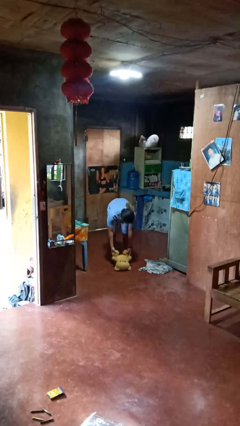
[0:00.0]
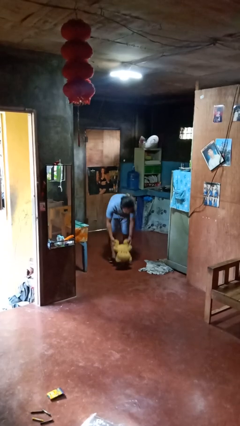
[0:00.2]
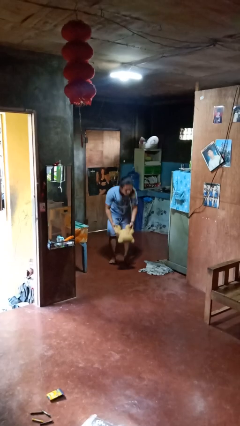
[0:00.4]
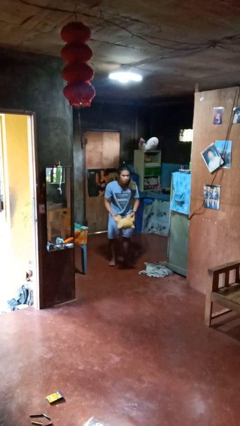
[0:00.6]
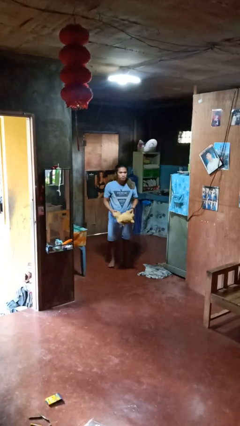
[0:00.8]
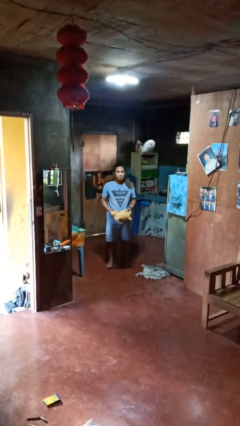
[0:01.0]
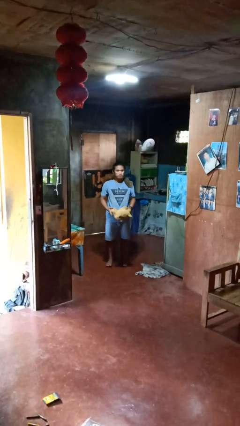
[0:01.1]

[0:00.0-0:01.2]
person picks up object from floor

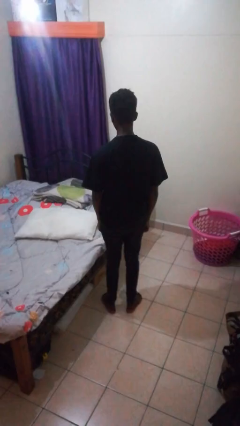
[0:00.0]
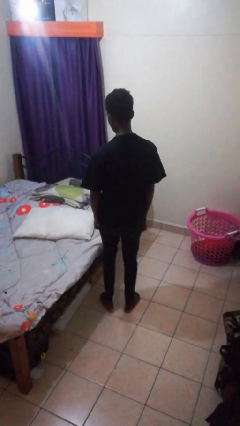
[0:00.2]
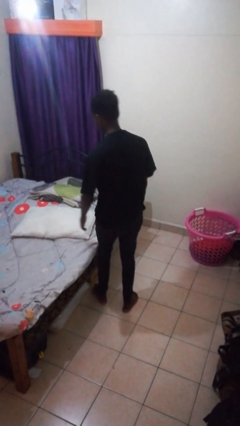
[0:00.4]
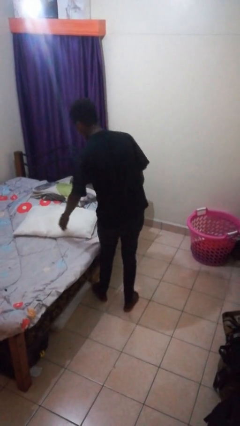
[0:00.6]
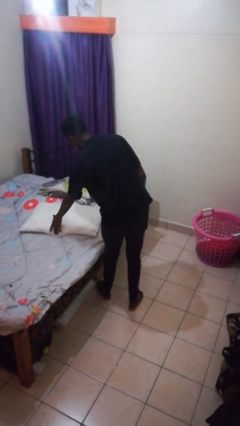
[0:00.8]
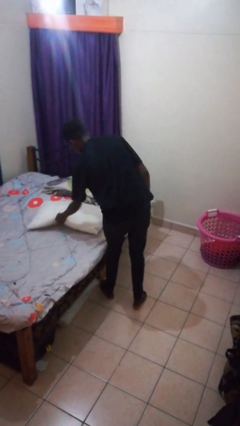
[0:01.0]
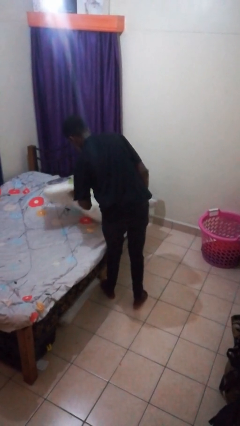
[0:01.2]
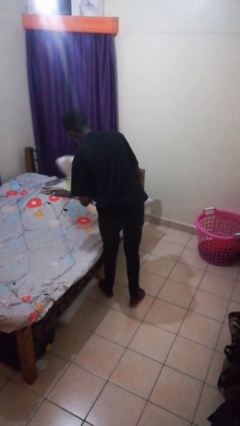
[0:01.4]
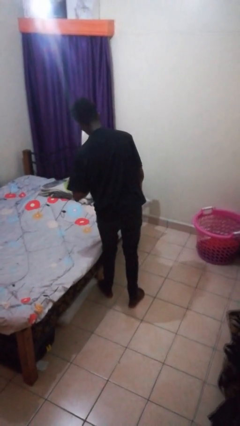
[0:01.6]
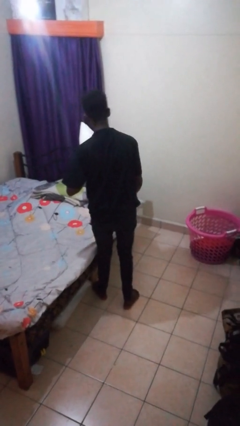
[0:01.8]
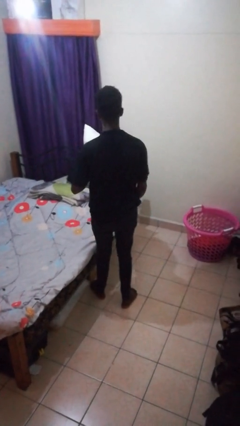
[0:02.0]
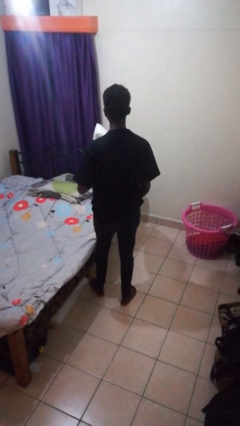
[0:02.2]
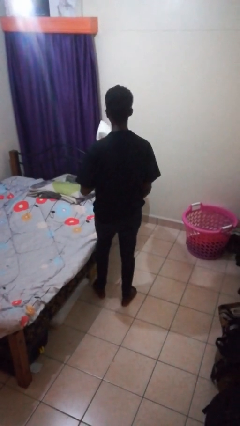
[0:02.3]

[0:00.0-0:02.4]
person picks up object from bed

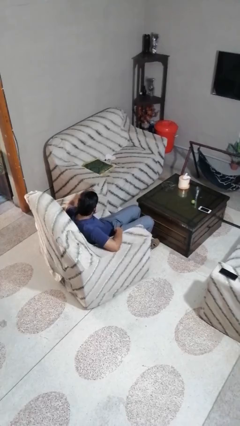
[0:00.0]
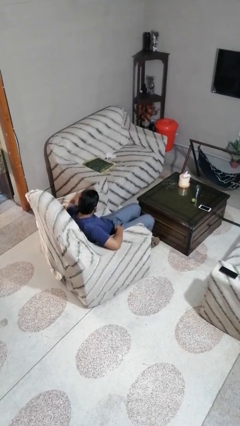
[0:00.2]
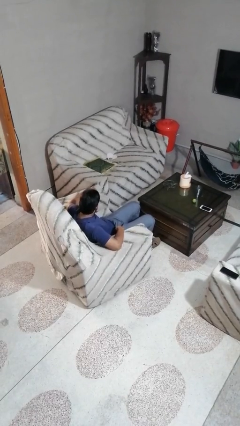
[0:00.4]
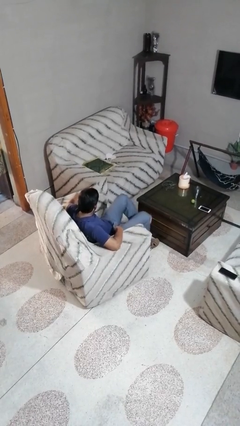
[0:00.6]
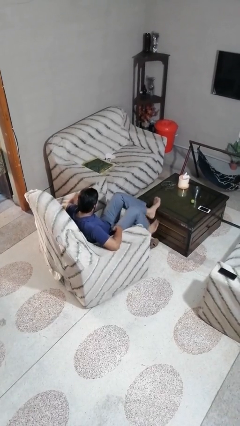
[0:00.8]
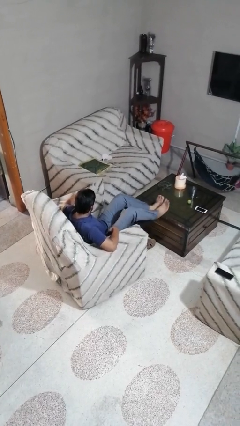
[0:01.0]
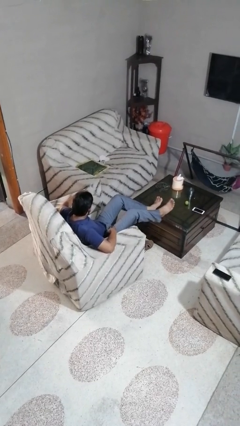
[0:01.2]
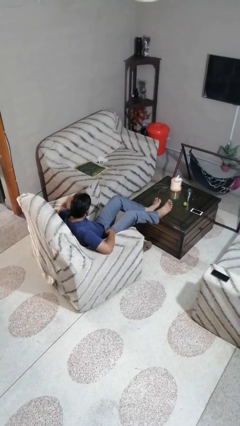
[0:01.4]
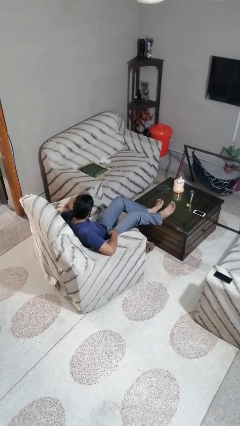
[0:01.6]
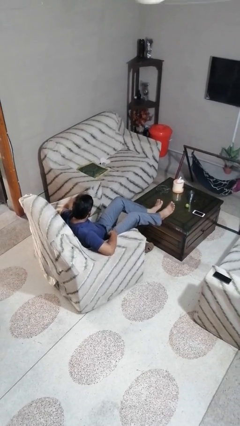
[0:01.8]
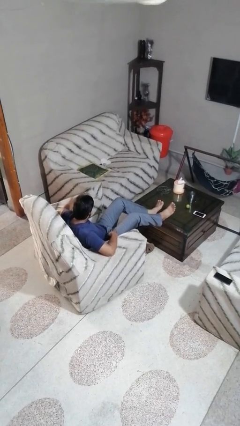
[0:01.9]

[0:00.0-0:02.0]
person puts feet up

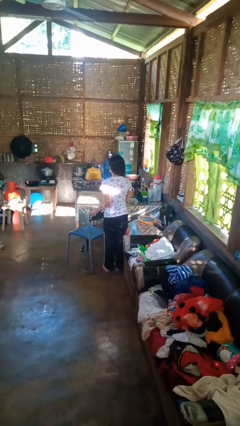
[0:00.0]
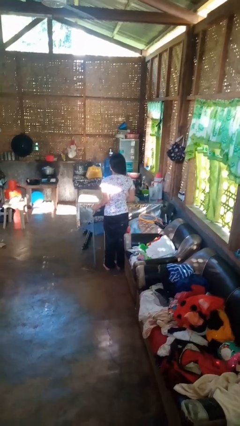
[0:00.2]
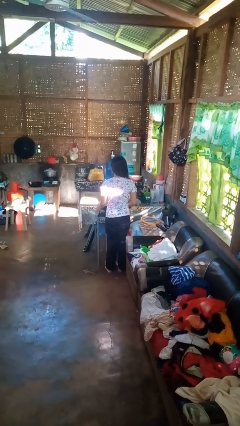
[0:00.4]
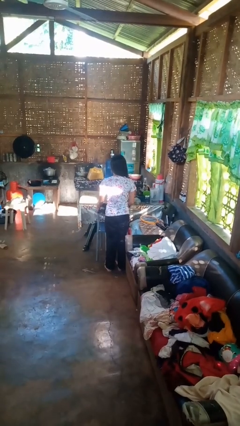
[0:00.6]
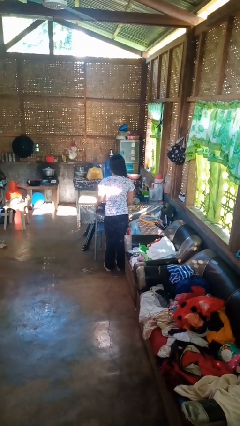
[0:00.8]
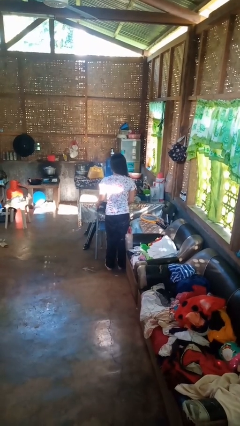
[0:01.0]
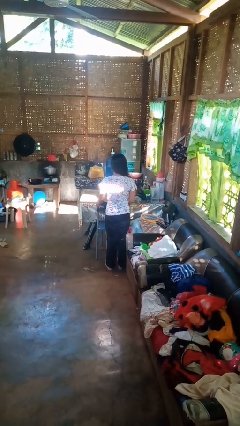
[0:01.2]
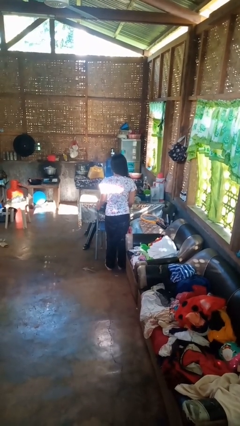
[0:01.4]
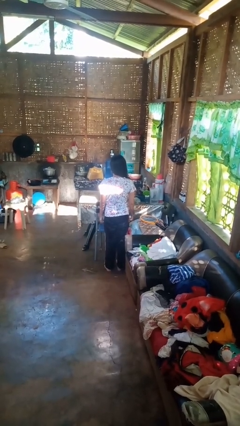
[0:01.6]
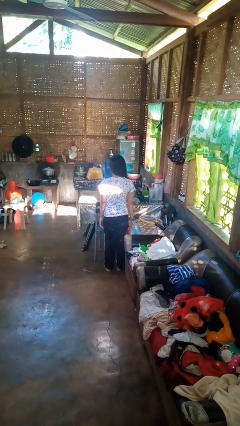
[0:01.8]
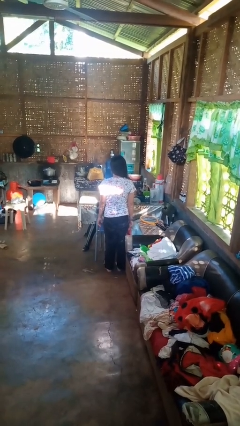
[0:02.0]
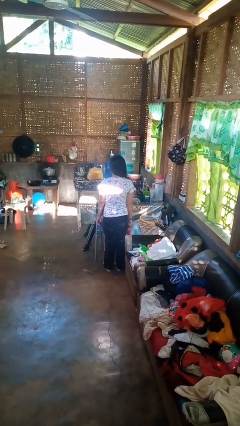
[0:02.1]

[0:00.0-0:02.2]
person pushes in chair

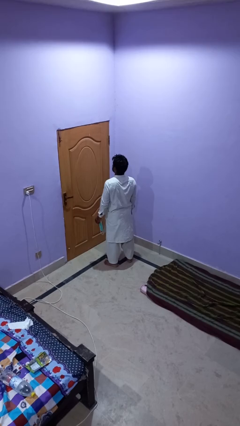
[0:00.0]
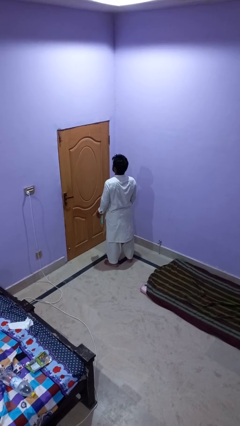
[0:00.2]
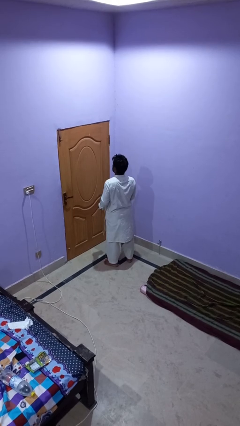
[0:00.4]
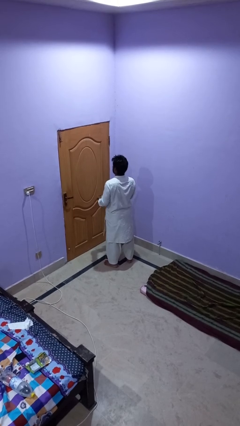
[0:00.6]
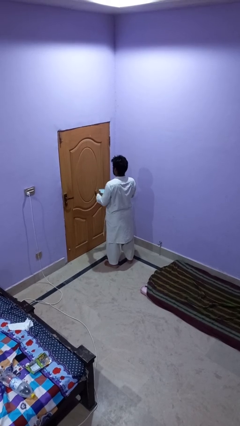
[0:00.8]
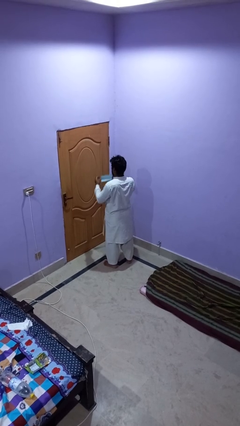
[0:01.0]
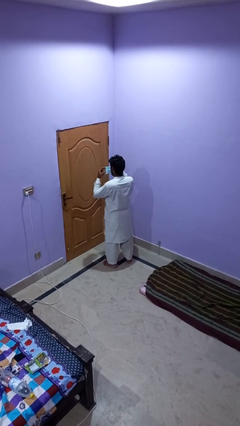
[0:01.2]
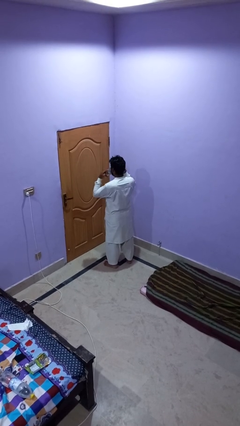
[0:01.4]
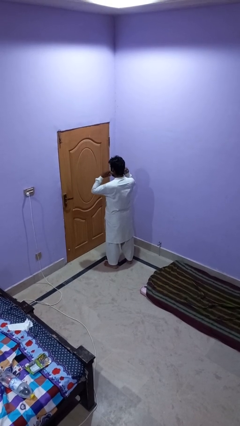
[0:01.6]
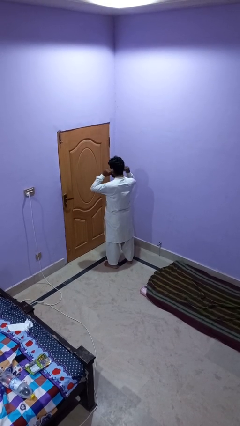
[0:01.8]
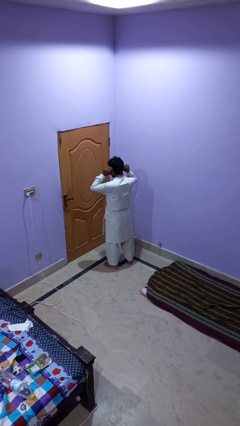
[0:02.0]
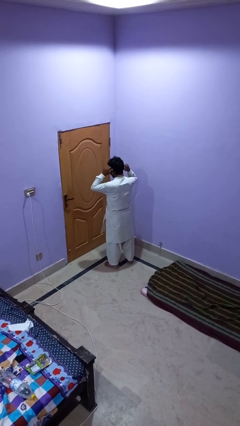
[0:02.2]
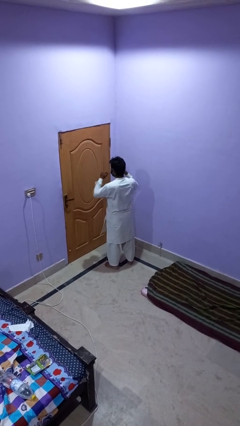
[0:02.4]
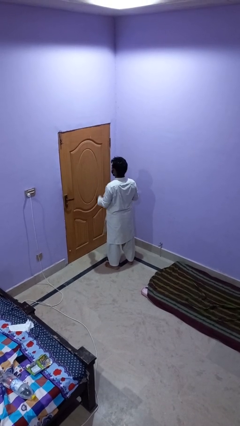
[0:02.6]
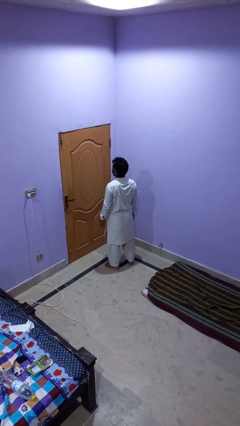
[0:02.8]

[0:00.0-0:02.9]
person puts on facemask

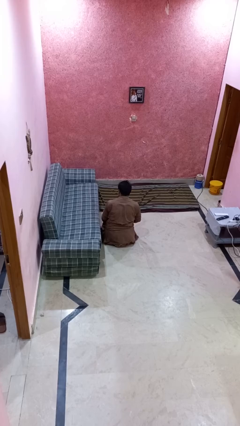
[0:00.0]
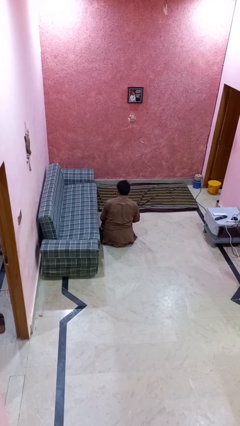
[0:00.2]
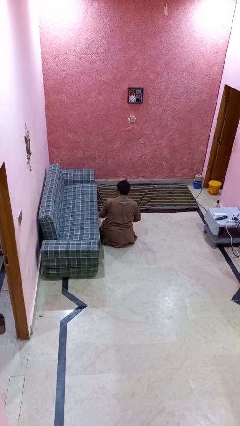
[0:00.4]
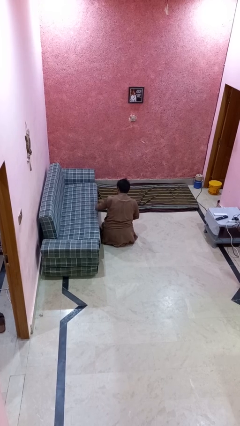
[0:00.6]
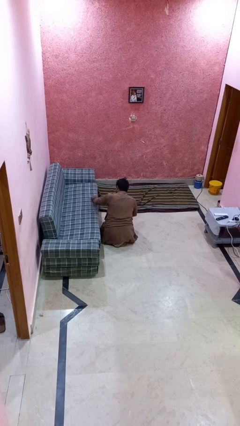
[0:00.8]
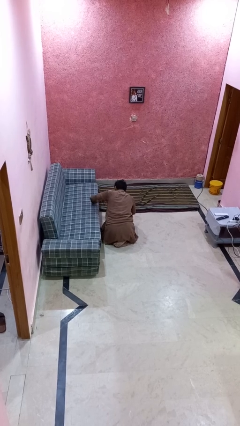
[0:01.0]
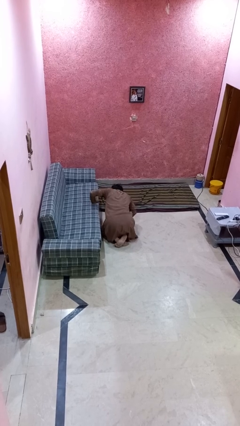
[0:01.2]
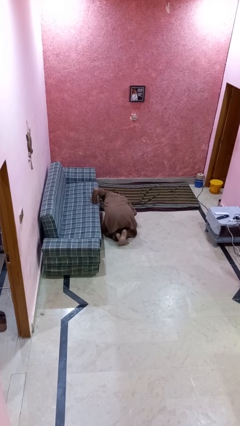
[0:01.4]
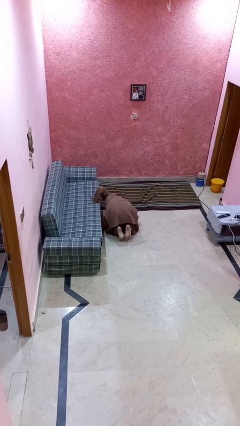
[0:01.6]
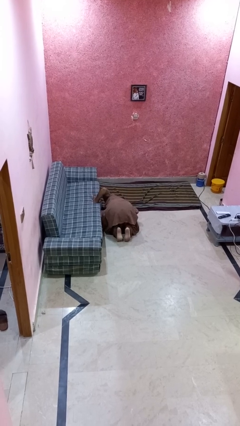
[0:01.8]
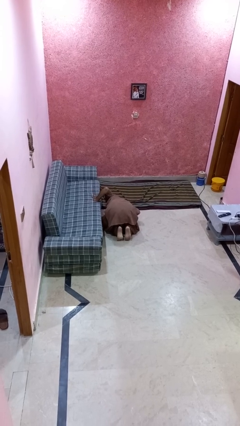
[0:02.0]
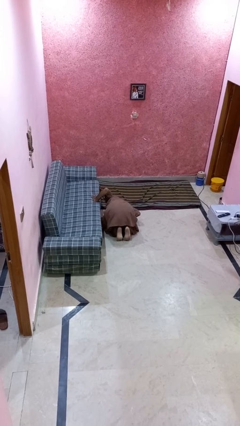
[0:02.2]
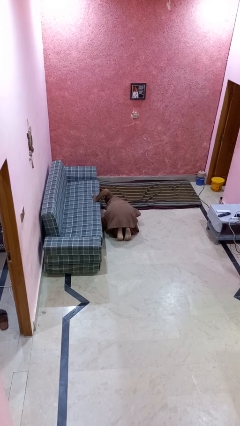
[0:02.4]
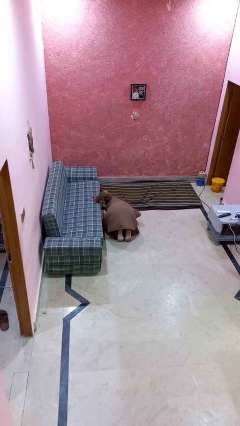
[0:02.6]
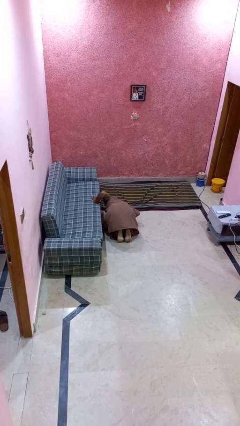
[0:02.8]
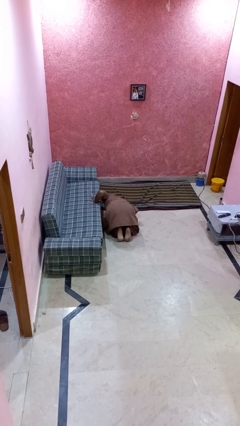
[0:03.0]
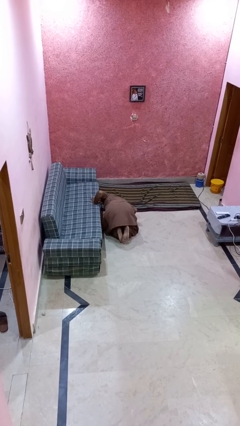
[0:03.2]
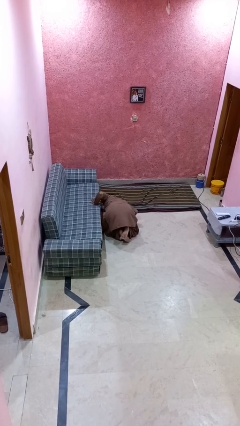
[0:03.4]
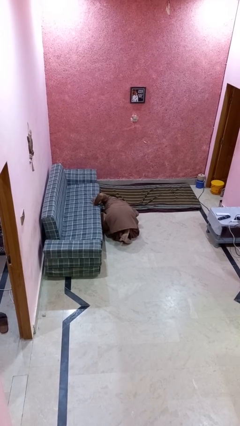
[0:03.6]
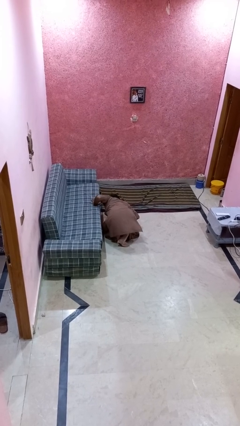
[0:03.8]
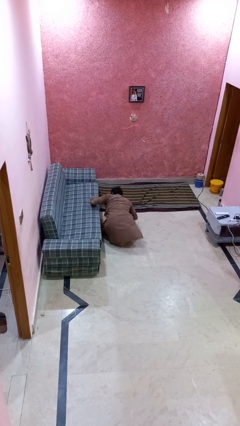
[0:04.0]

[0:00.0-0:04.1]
person searches under couch

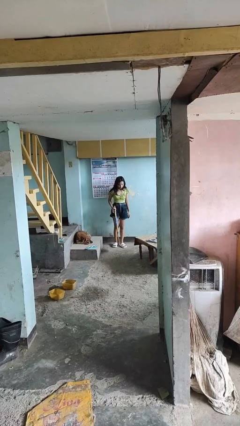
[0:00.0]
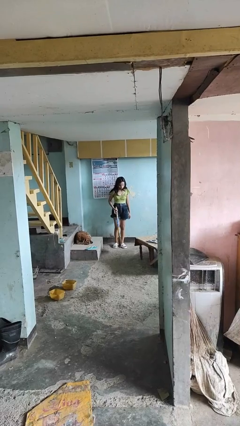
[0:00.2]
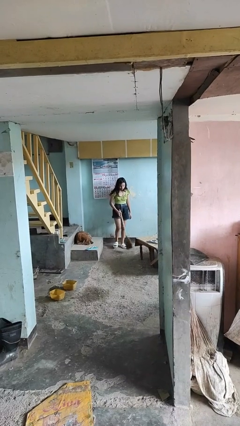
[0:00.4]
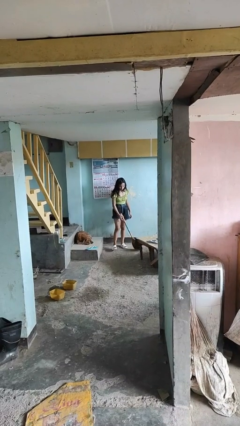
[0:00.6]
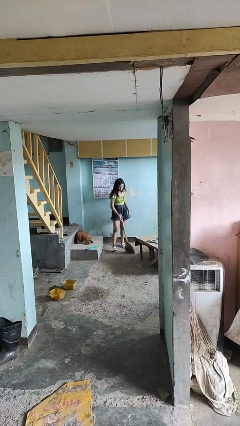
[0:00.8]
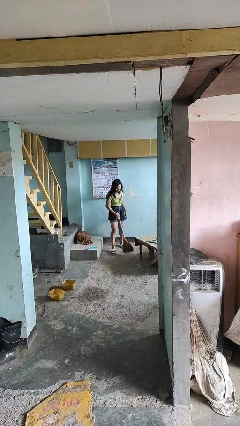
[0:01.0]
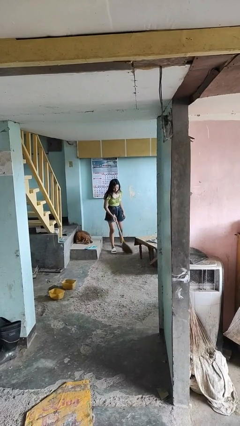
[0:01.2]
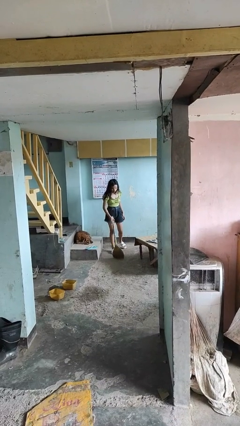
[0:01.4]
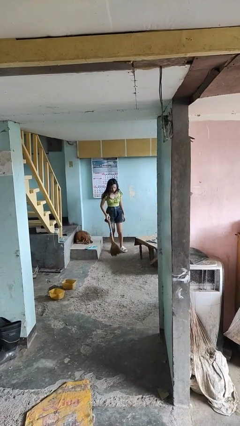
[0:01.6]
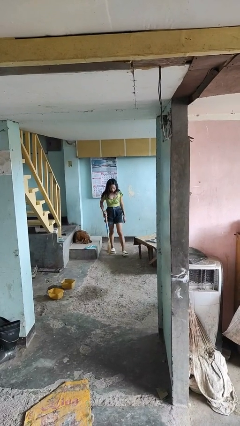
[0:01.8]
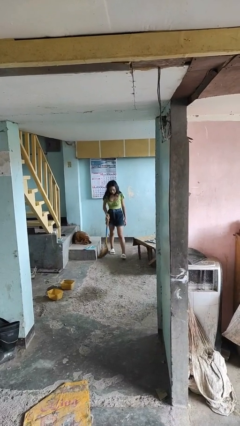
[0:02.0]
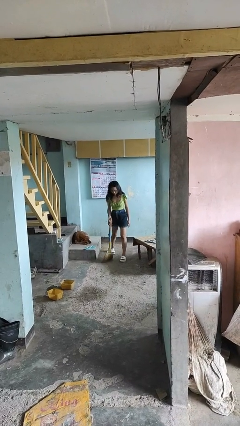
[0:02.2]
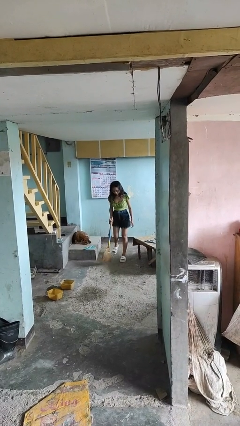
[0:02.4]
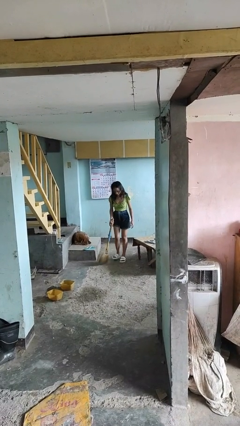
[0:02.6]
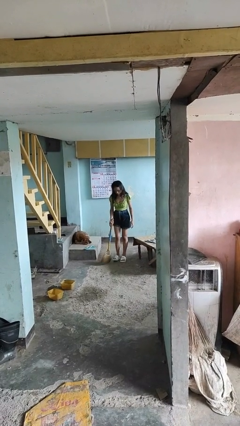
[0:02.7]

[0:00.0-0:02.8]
person sweeps floor

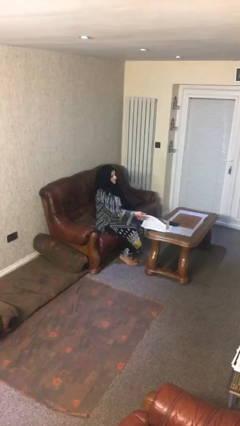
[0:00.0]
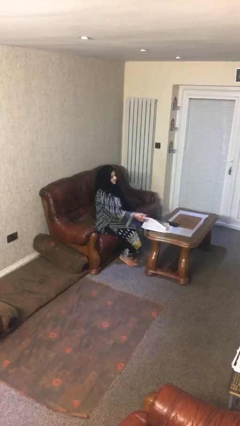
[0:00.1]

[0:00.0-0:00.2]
person reads document
